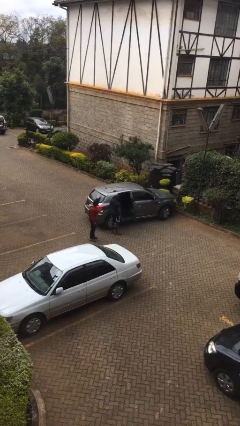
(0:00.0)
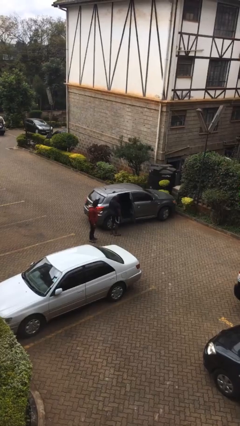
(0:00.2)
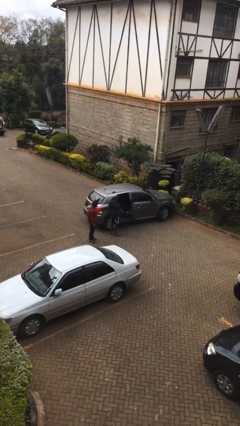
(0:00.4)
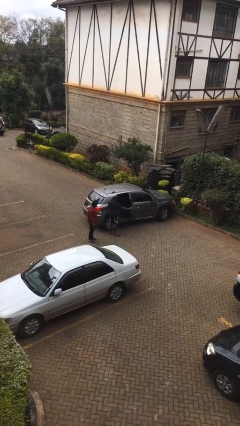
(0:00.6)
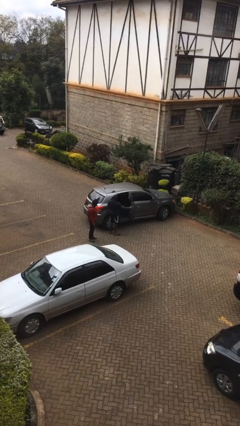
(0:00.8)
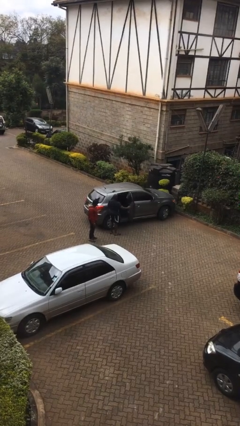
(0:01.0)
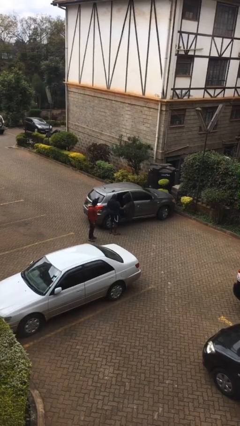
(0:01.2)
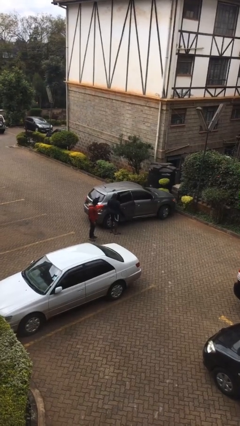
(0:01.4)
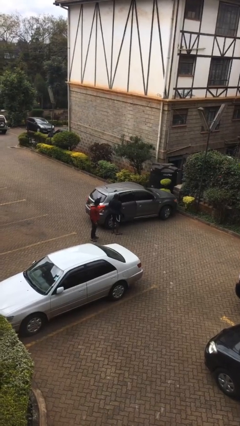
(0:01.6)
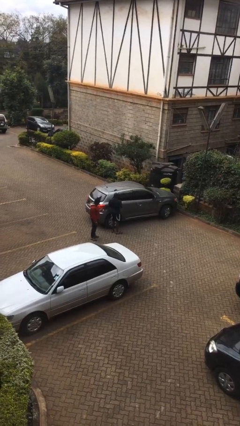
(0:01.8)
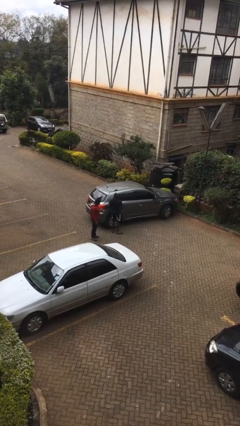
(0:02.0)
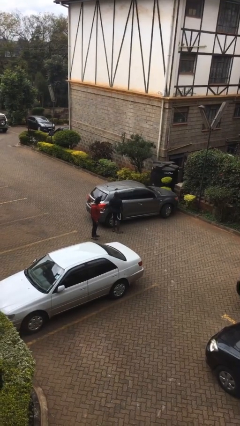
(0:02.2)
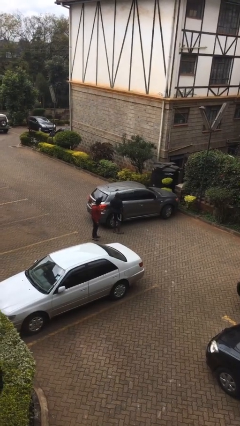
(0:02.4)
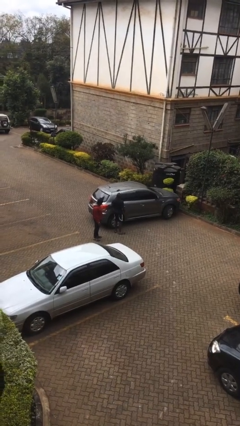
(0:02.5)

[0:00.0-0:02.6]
person closes car door

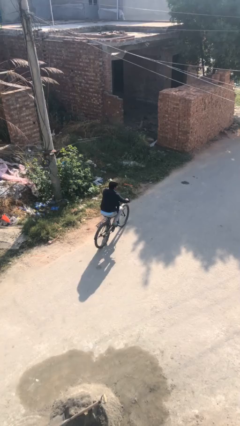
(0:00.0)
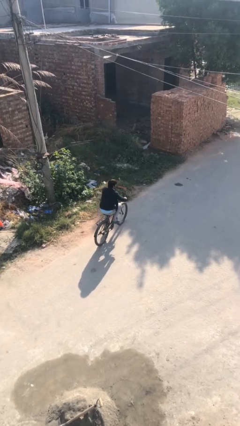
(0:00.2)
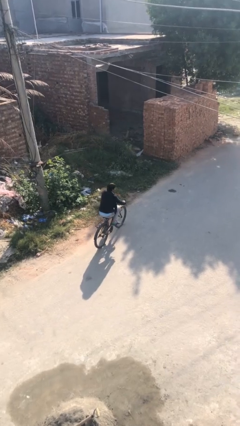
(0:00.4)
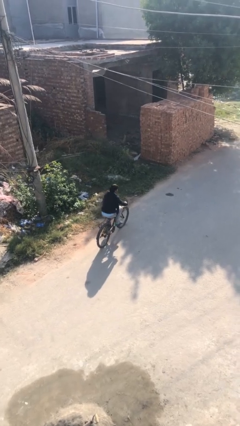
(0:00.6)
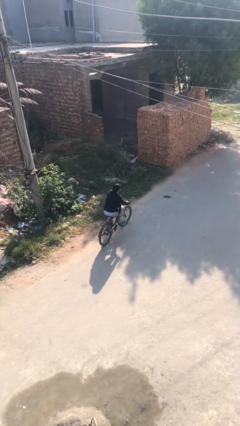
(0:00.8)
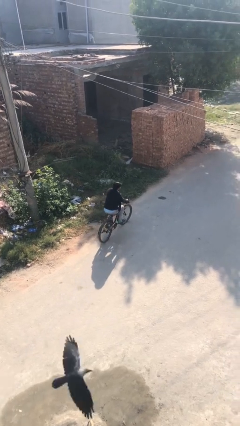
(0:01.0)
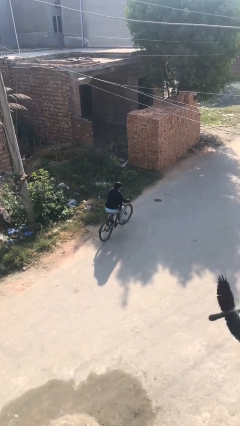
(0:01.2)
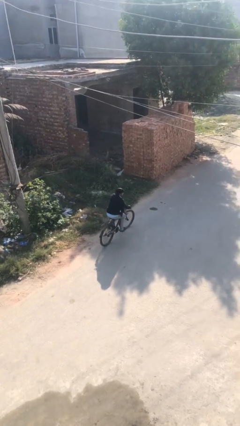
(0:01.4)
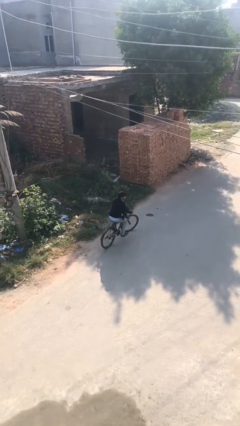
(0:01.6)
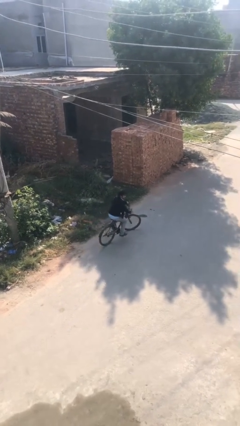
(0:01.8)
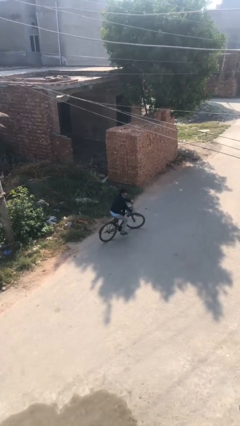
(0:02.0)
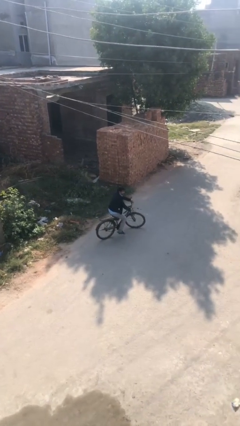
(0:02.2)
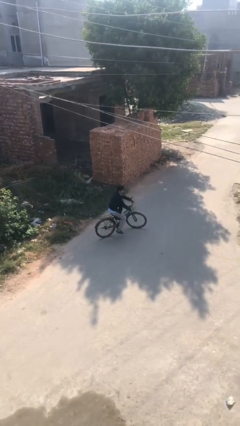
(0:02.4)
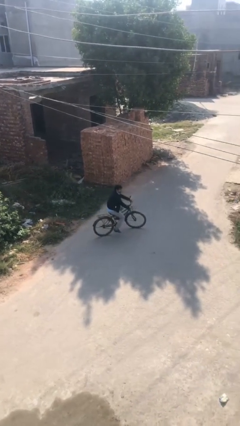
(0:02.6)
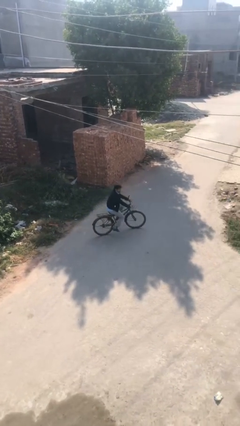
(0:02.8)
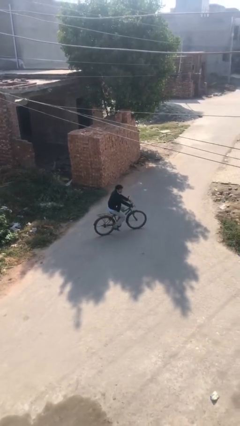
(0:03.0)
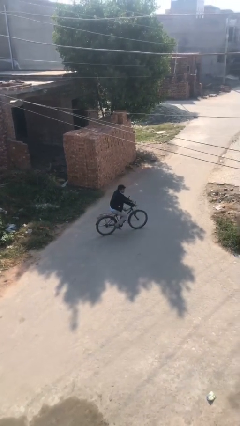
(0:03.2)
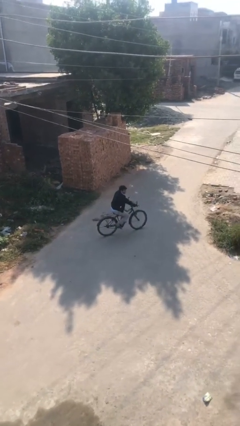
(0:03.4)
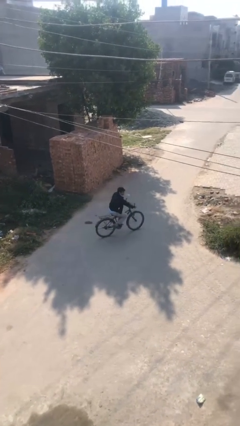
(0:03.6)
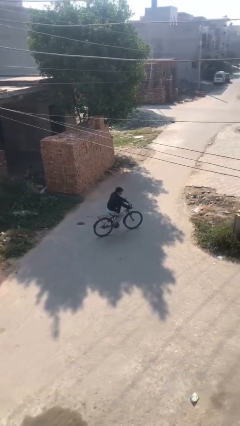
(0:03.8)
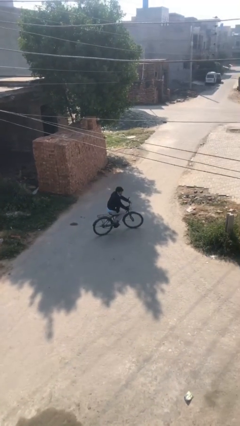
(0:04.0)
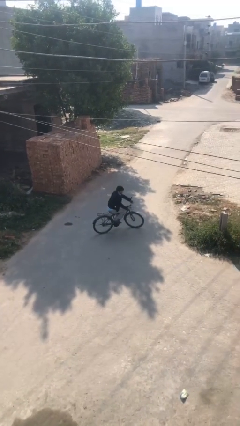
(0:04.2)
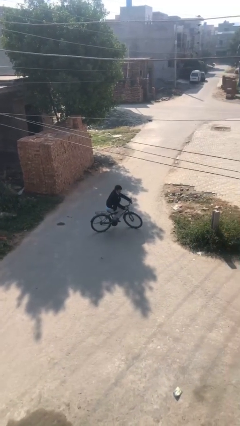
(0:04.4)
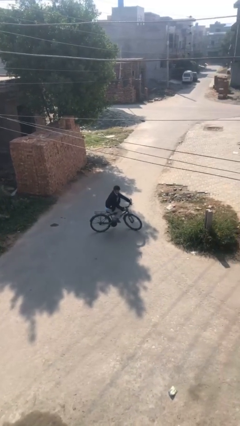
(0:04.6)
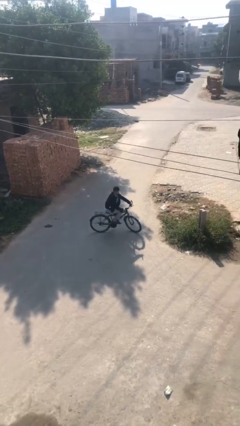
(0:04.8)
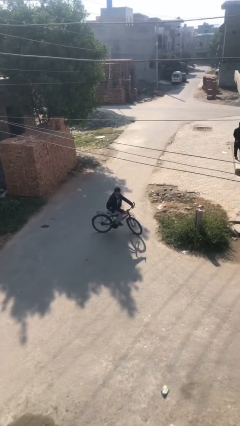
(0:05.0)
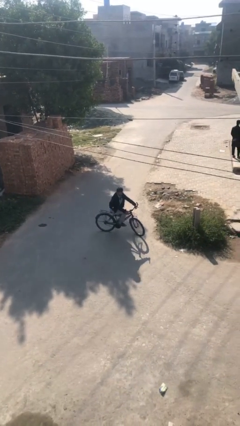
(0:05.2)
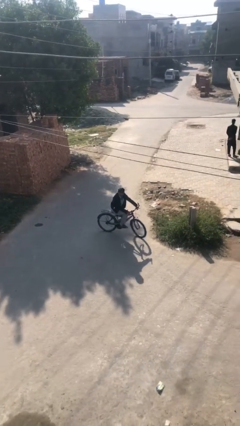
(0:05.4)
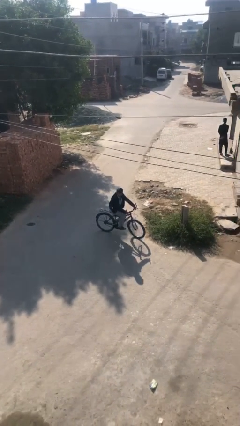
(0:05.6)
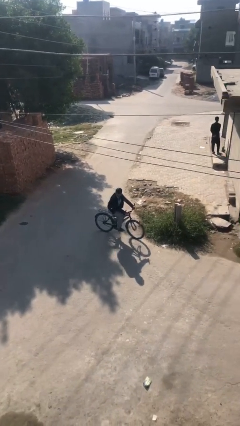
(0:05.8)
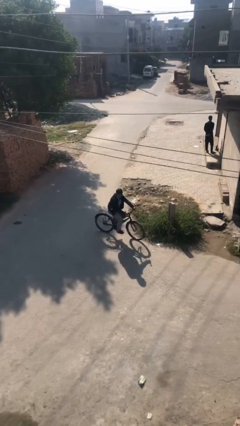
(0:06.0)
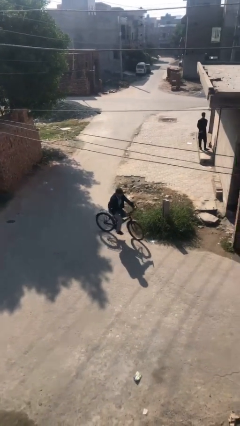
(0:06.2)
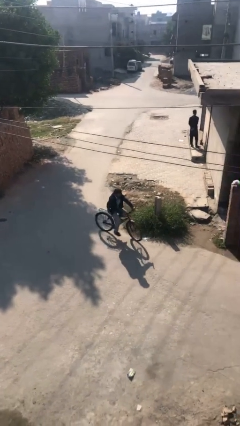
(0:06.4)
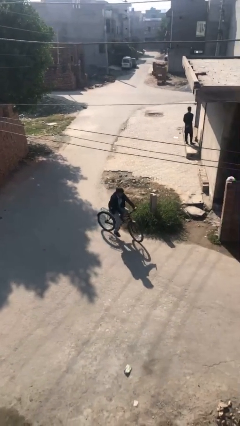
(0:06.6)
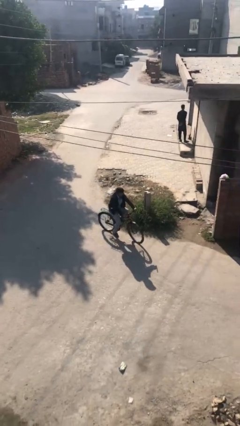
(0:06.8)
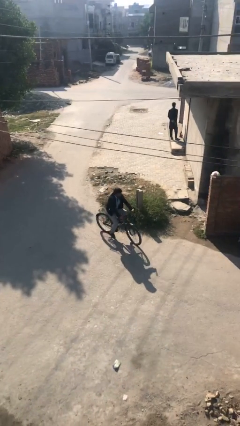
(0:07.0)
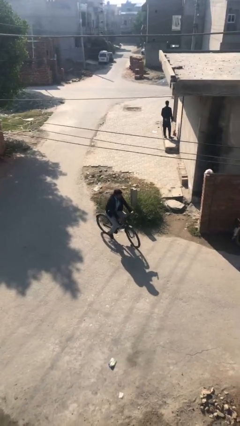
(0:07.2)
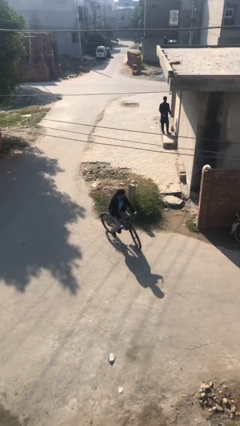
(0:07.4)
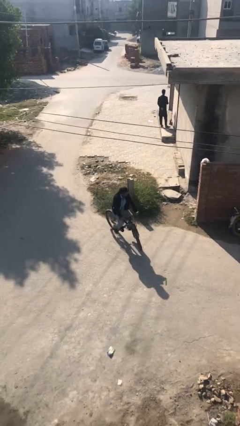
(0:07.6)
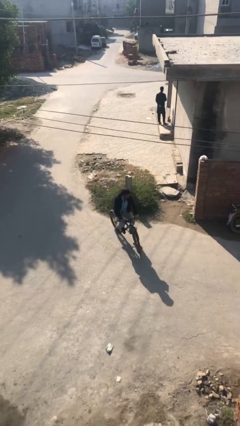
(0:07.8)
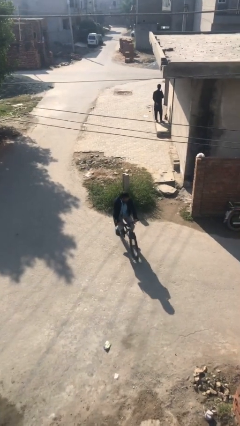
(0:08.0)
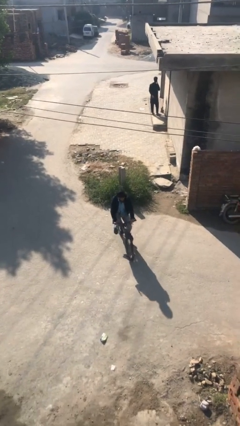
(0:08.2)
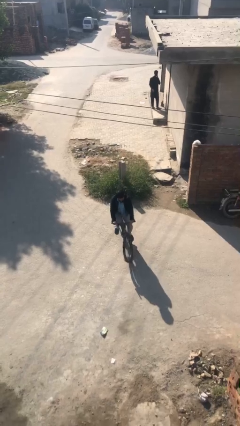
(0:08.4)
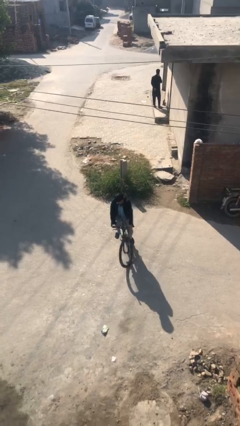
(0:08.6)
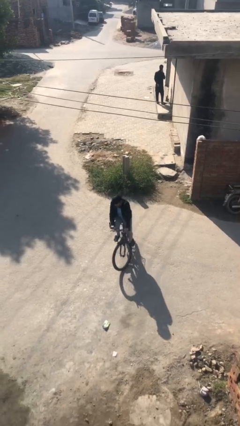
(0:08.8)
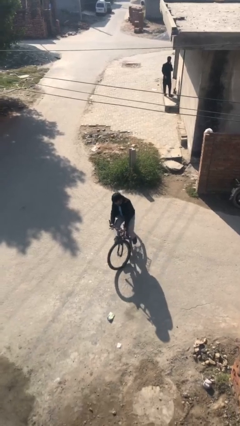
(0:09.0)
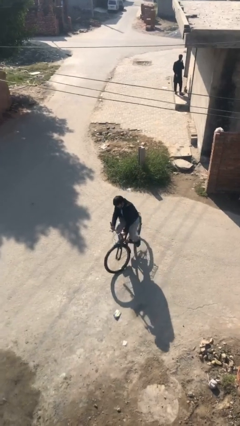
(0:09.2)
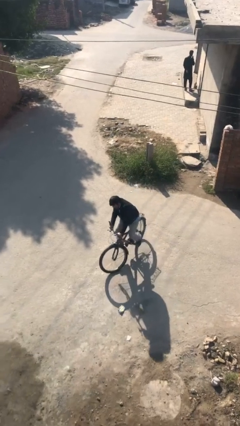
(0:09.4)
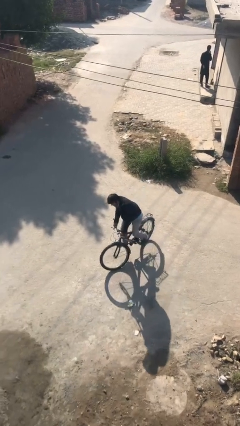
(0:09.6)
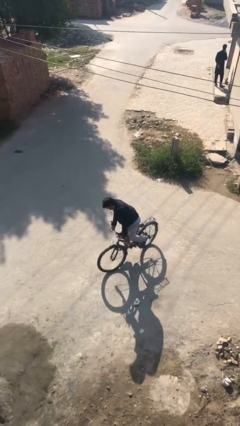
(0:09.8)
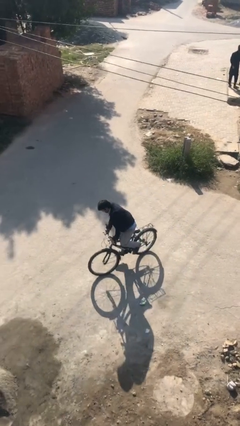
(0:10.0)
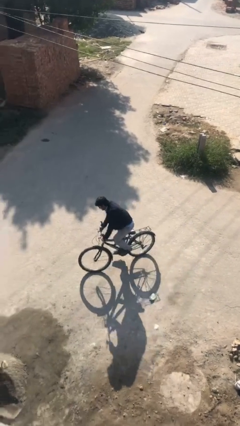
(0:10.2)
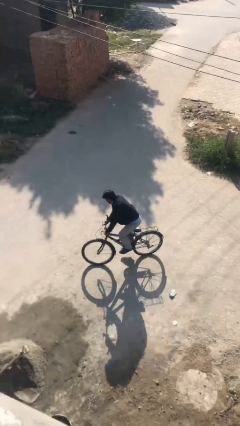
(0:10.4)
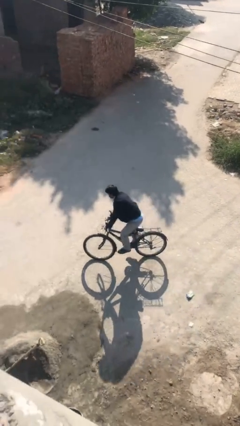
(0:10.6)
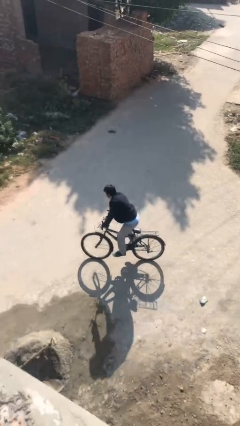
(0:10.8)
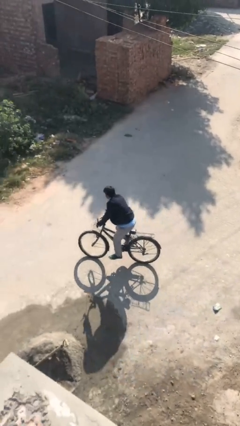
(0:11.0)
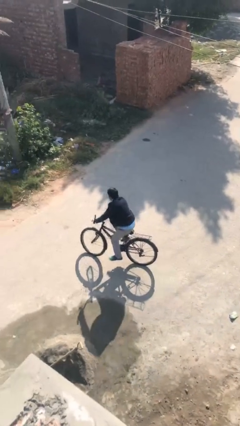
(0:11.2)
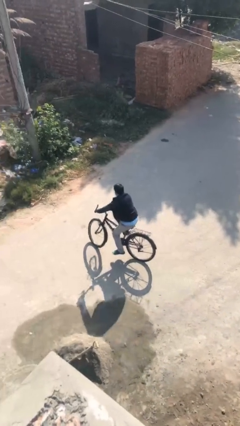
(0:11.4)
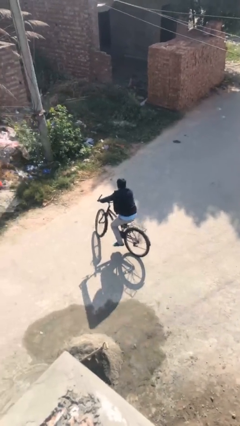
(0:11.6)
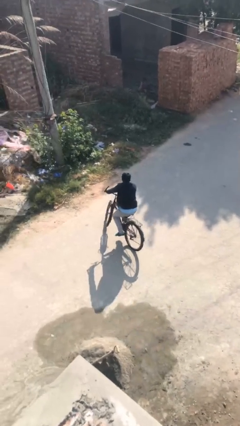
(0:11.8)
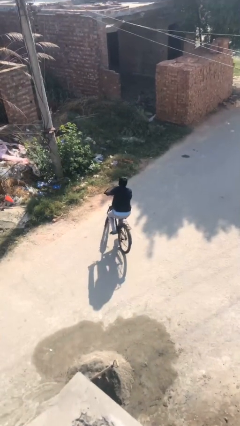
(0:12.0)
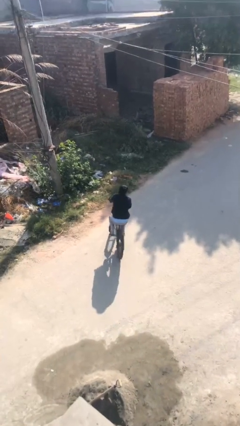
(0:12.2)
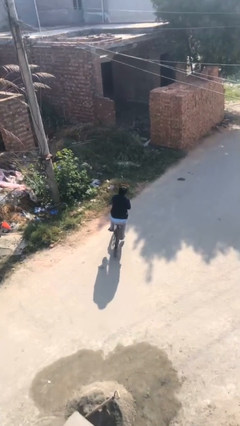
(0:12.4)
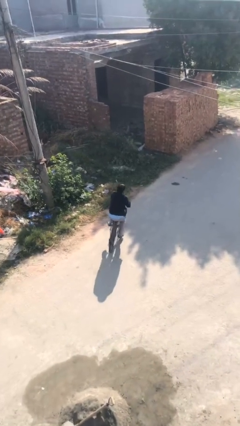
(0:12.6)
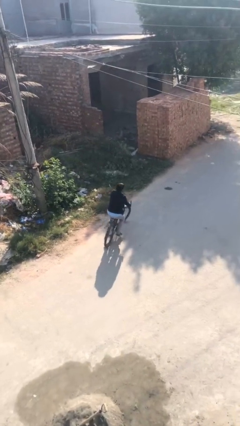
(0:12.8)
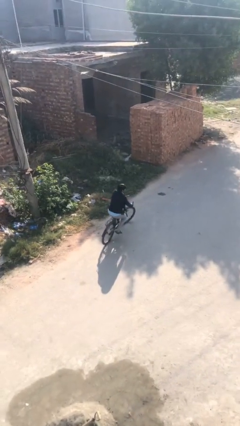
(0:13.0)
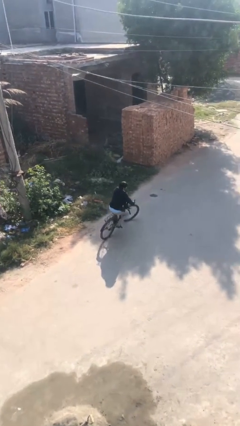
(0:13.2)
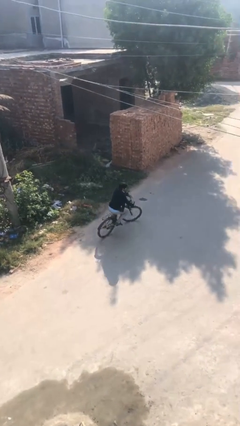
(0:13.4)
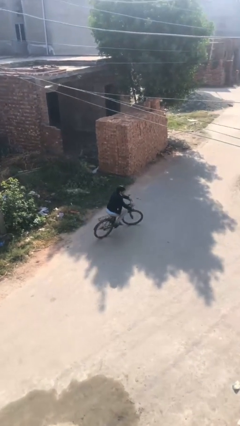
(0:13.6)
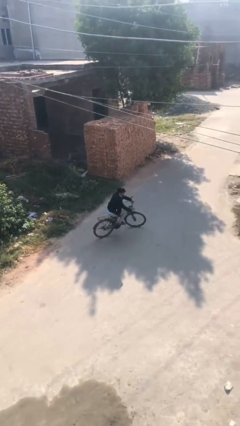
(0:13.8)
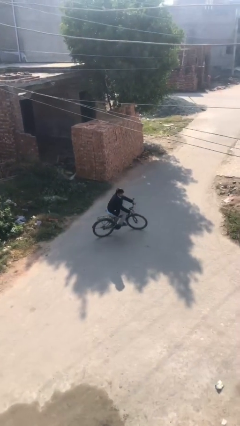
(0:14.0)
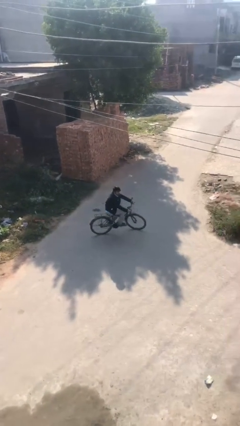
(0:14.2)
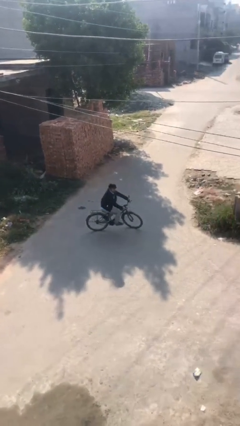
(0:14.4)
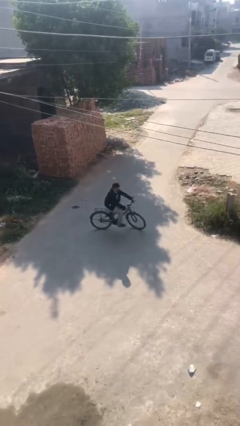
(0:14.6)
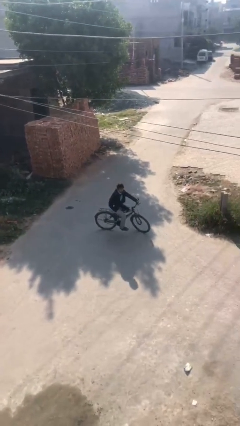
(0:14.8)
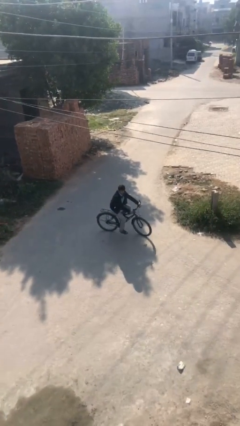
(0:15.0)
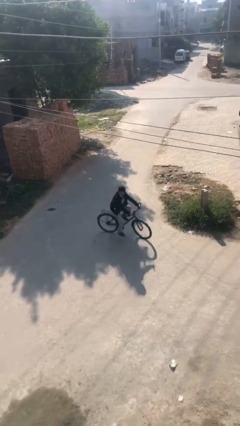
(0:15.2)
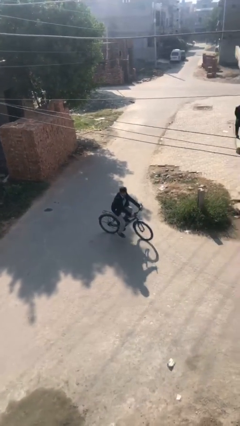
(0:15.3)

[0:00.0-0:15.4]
person rides bicycle

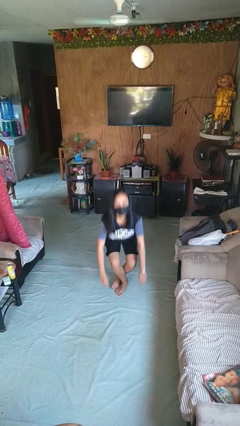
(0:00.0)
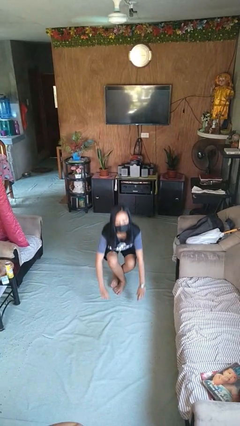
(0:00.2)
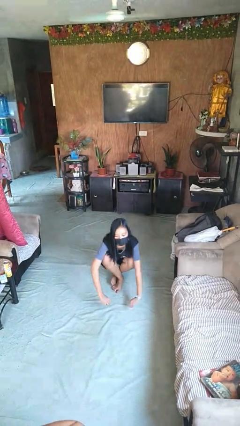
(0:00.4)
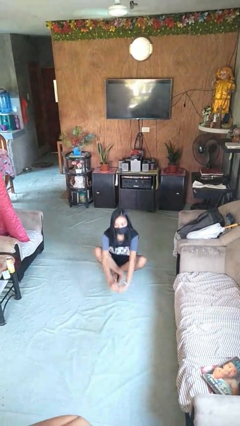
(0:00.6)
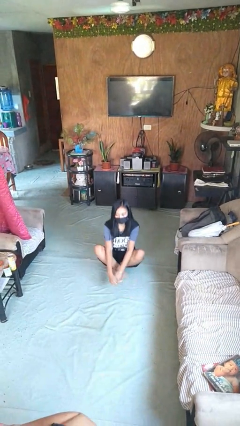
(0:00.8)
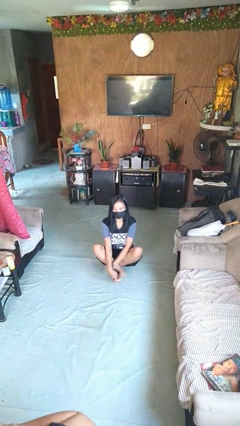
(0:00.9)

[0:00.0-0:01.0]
person sits crisscross
